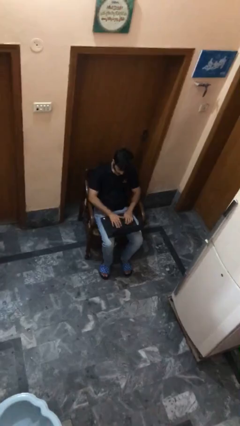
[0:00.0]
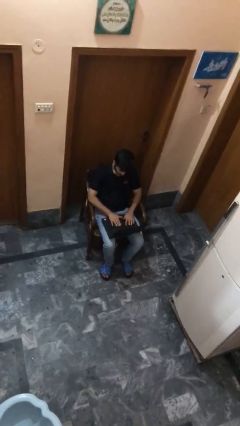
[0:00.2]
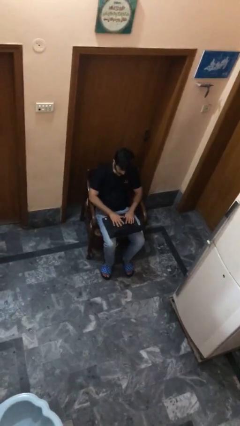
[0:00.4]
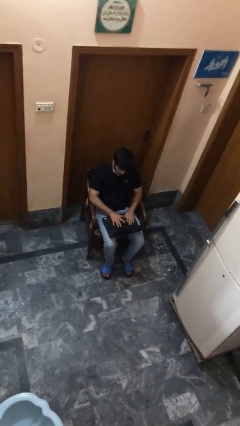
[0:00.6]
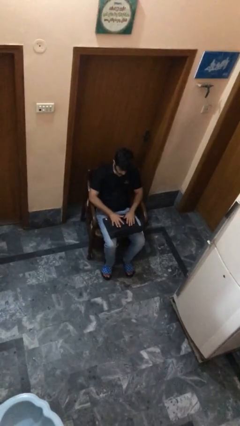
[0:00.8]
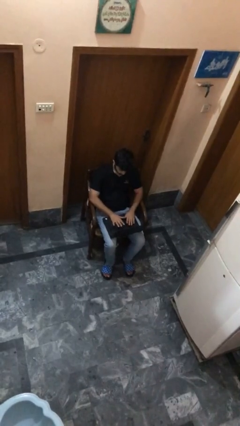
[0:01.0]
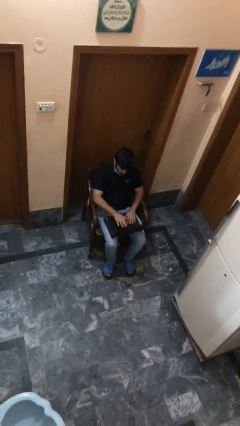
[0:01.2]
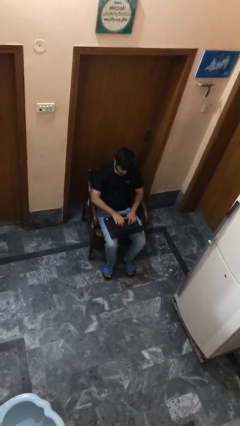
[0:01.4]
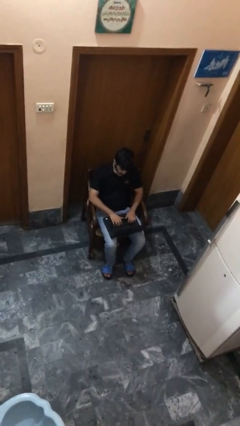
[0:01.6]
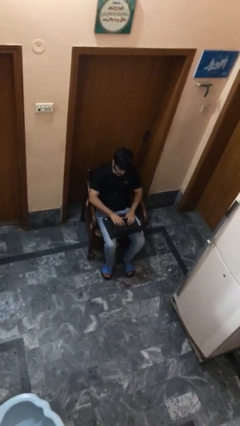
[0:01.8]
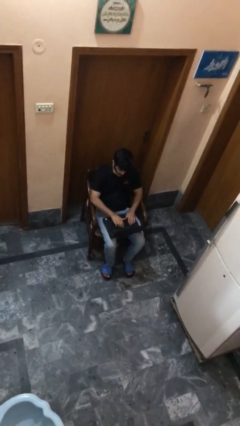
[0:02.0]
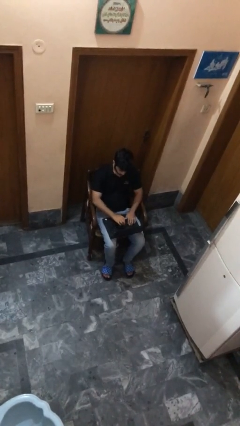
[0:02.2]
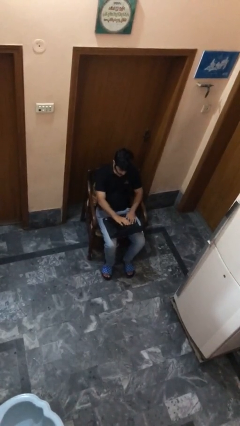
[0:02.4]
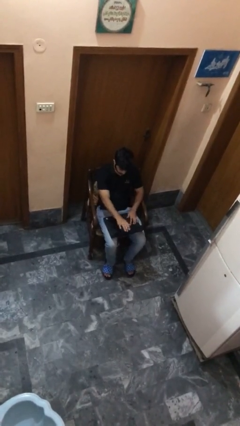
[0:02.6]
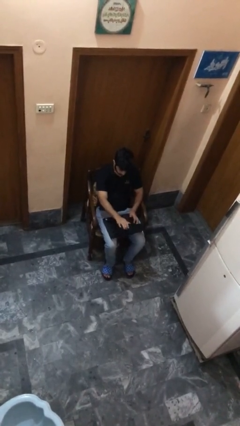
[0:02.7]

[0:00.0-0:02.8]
person interacts with laptop

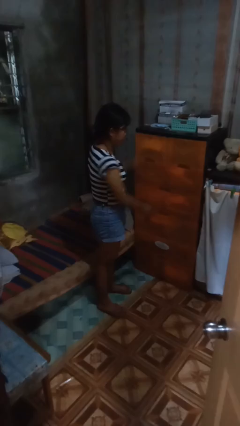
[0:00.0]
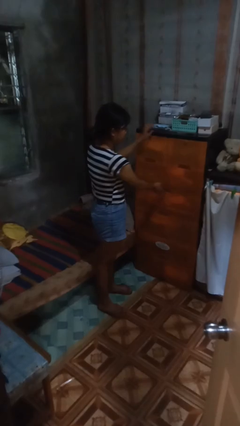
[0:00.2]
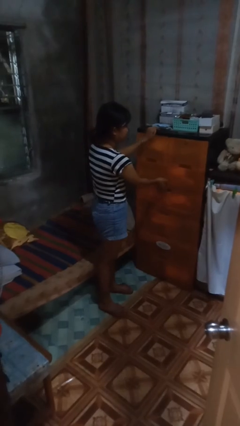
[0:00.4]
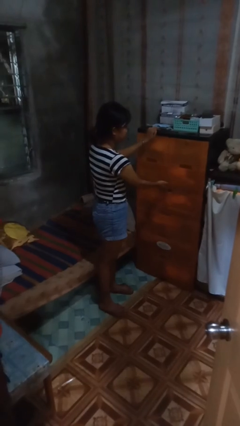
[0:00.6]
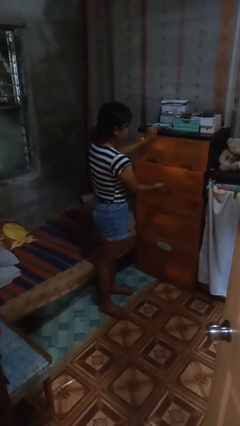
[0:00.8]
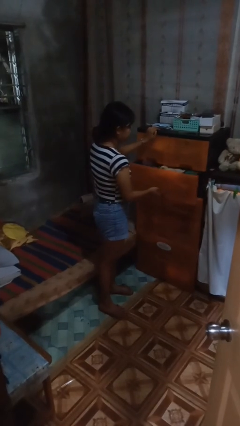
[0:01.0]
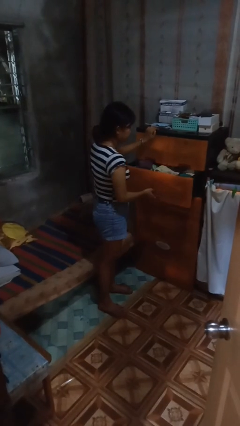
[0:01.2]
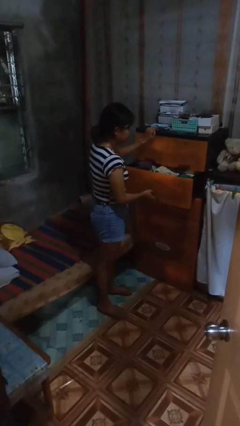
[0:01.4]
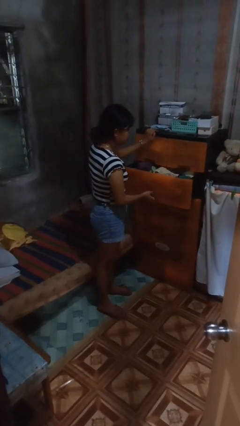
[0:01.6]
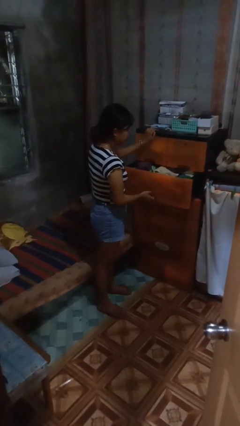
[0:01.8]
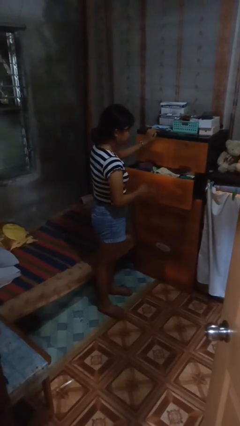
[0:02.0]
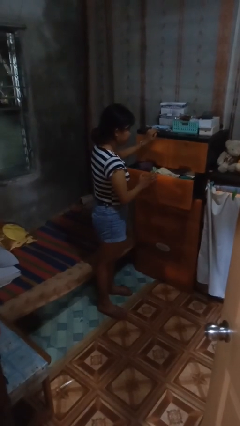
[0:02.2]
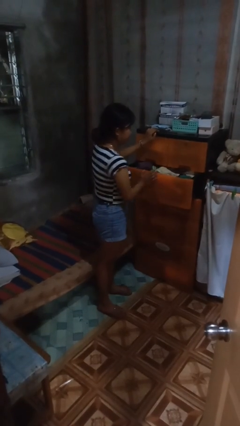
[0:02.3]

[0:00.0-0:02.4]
person opens dresser drawer

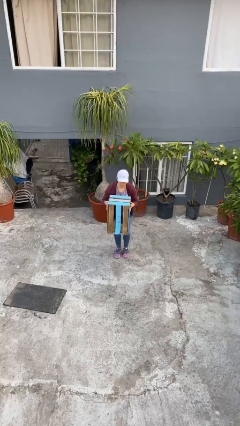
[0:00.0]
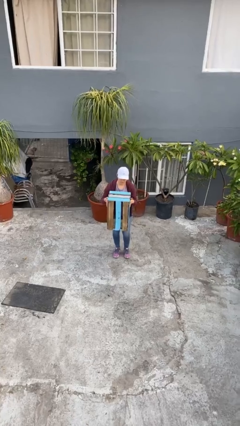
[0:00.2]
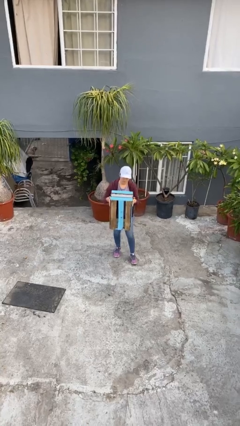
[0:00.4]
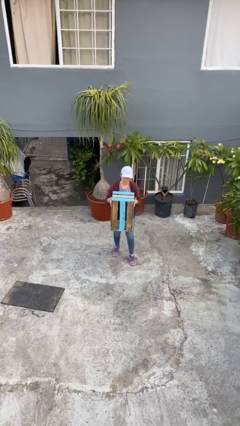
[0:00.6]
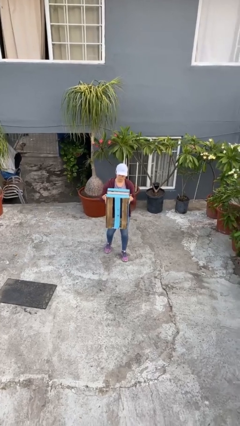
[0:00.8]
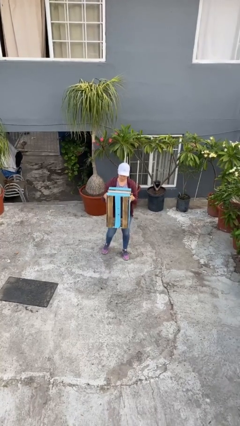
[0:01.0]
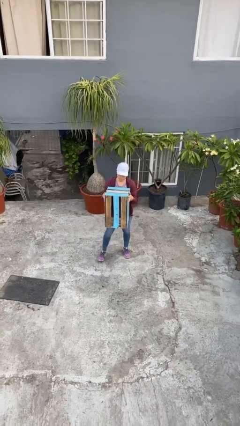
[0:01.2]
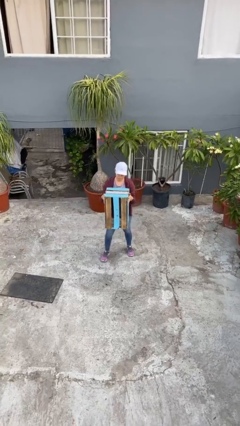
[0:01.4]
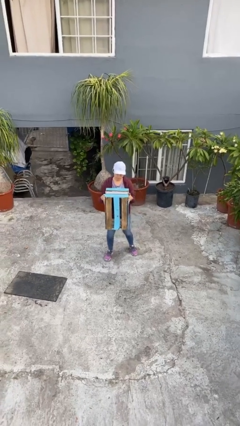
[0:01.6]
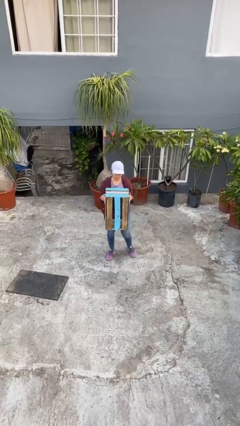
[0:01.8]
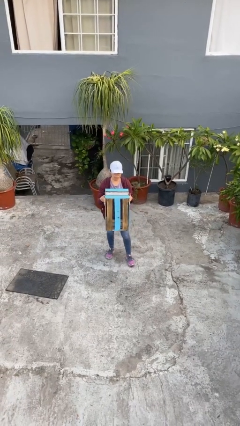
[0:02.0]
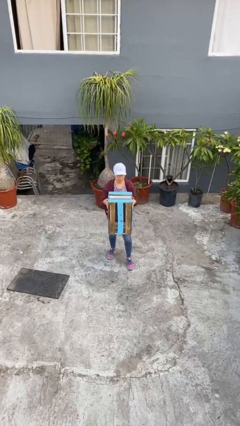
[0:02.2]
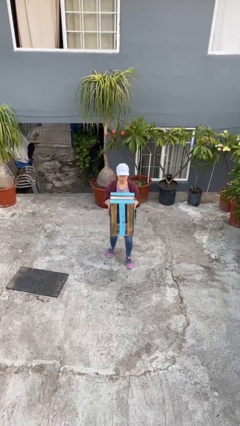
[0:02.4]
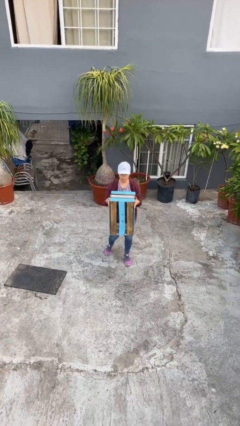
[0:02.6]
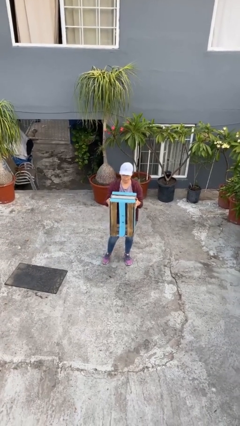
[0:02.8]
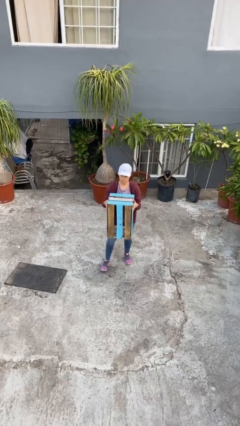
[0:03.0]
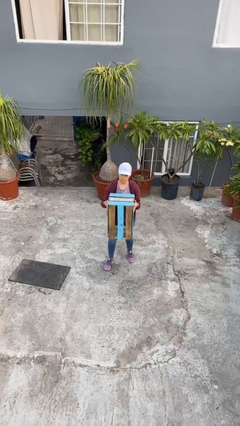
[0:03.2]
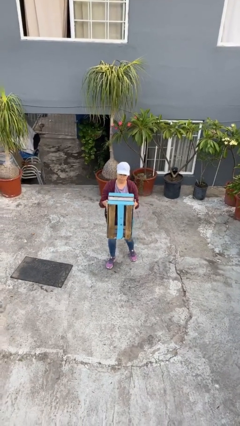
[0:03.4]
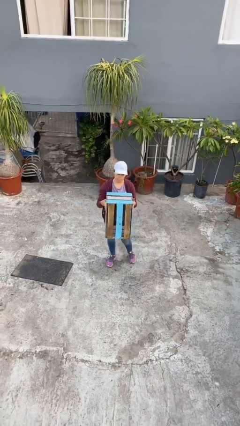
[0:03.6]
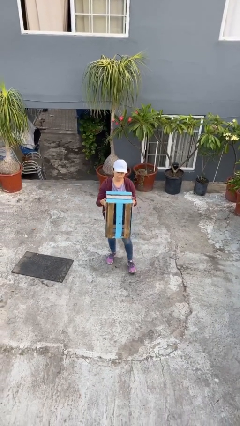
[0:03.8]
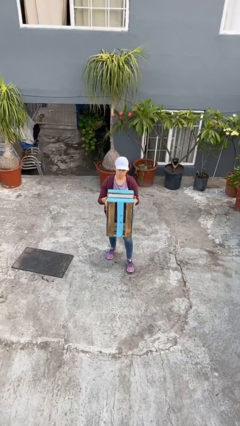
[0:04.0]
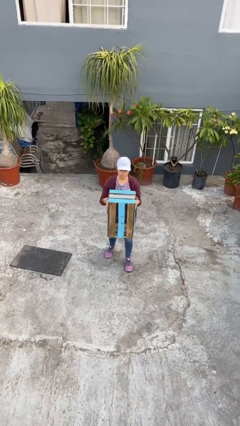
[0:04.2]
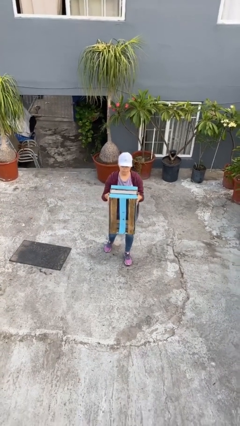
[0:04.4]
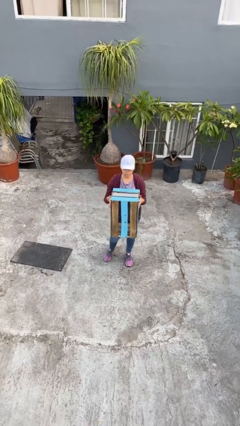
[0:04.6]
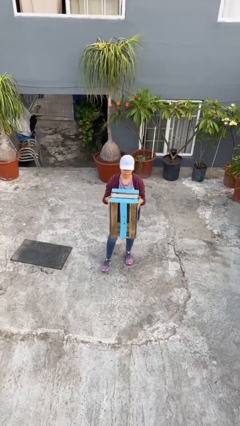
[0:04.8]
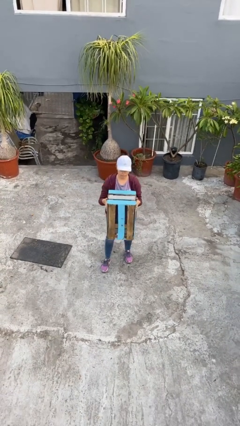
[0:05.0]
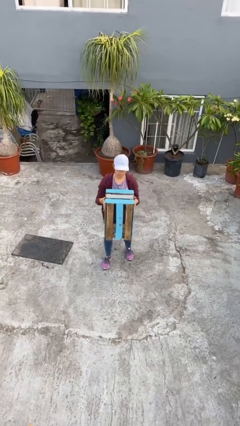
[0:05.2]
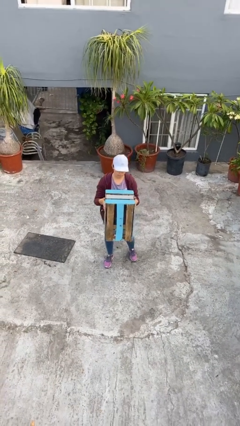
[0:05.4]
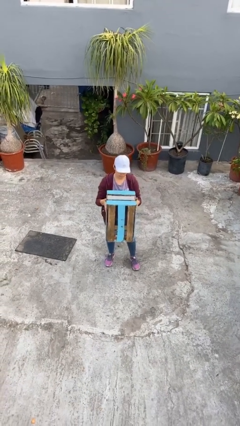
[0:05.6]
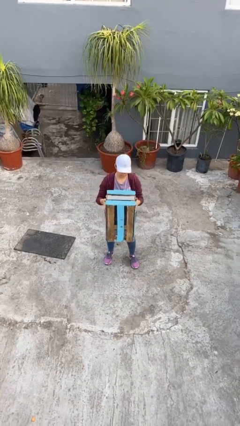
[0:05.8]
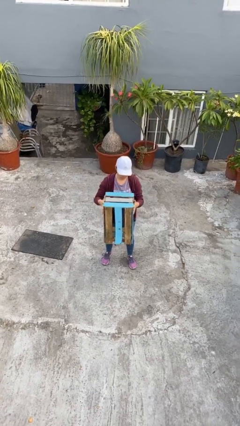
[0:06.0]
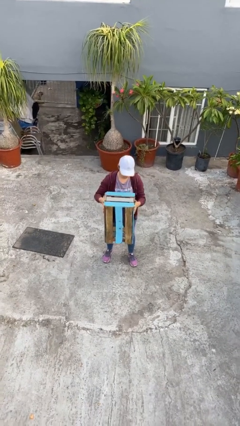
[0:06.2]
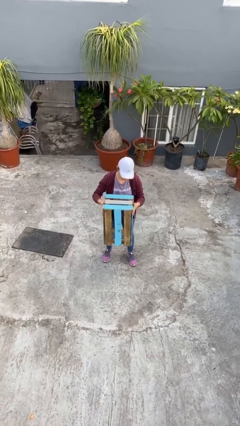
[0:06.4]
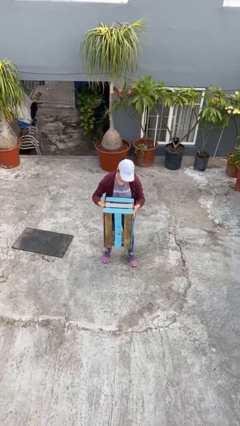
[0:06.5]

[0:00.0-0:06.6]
person carries heavy object

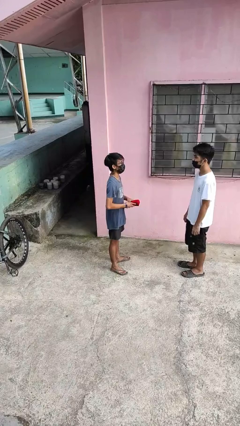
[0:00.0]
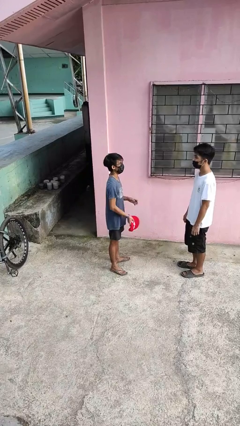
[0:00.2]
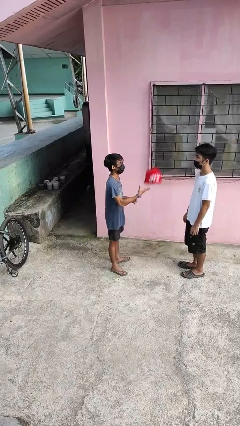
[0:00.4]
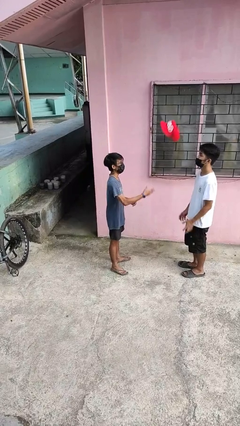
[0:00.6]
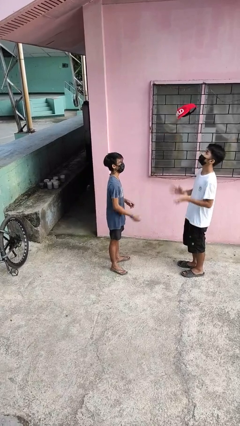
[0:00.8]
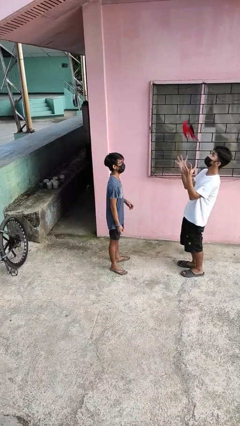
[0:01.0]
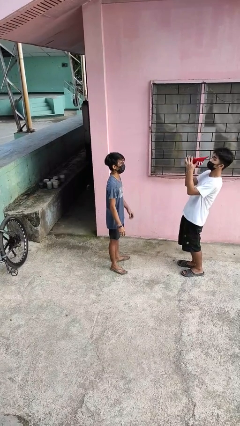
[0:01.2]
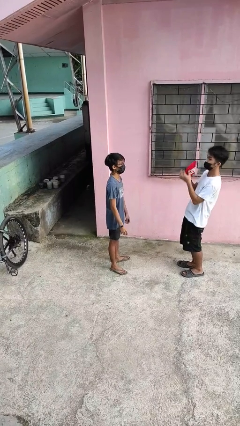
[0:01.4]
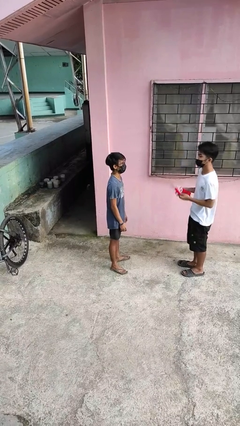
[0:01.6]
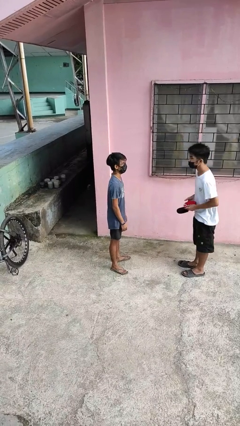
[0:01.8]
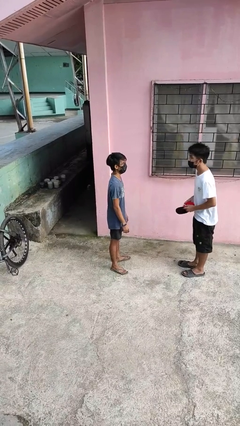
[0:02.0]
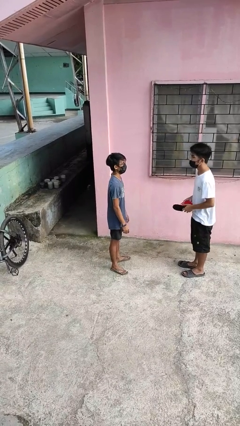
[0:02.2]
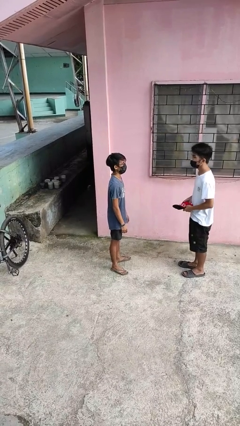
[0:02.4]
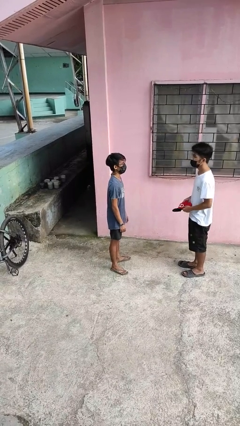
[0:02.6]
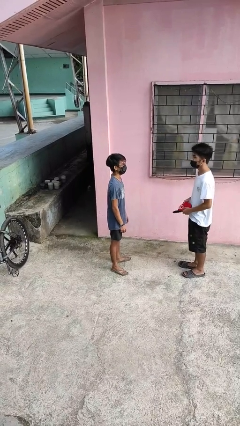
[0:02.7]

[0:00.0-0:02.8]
person throws object to person

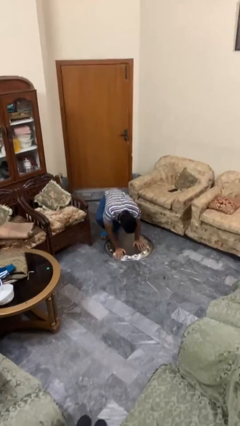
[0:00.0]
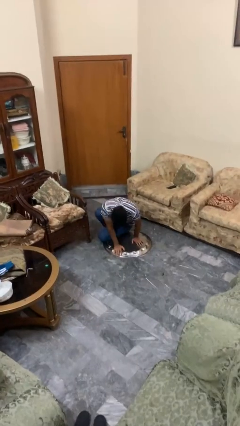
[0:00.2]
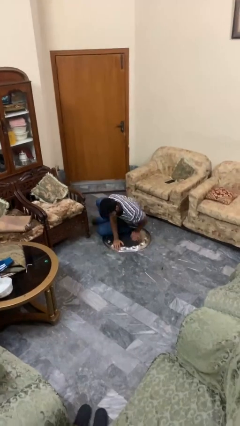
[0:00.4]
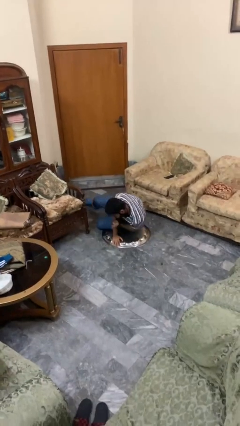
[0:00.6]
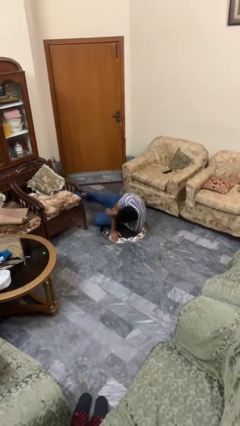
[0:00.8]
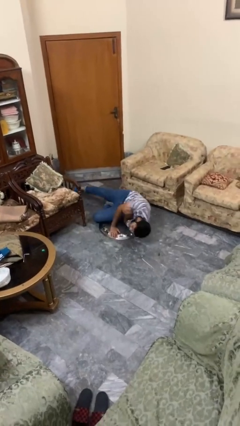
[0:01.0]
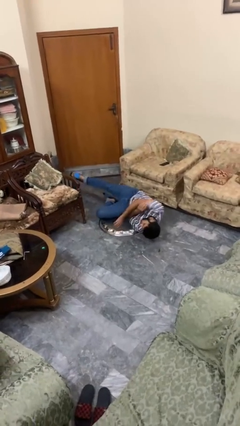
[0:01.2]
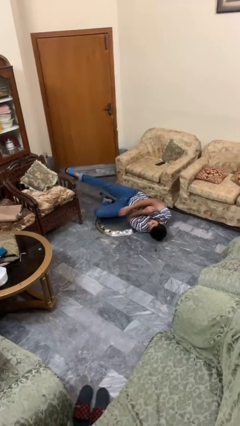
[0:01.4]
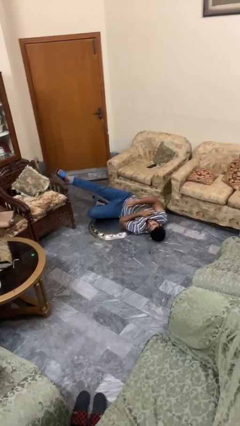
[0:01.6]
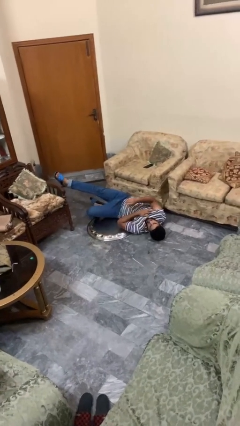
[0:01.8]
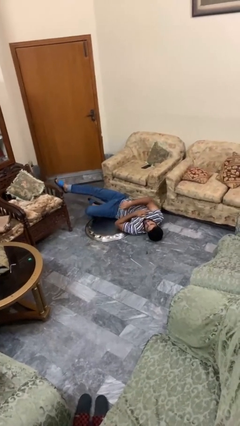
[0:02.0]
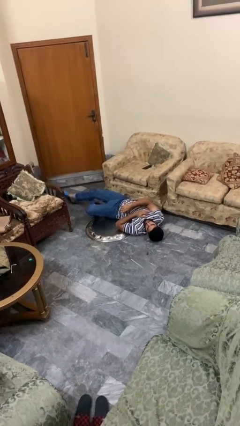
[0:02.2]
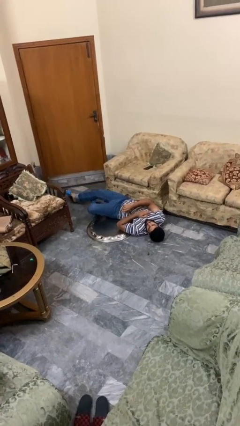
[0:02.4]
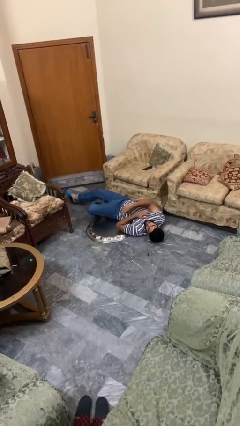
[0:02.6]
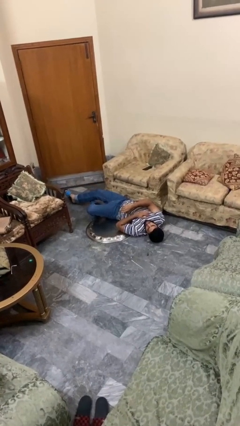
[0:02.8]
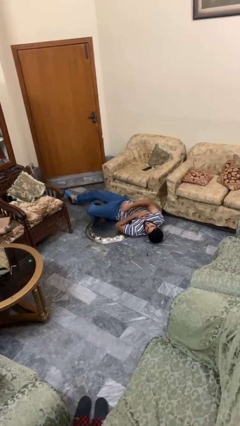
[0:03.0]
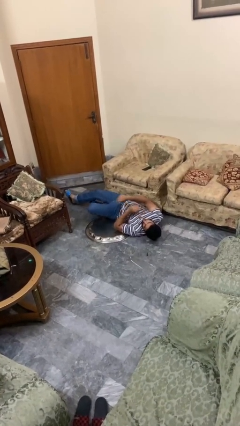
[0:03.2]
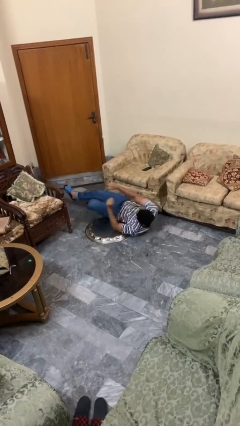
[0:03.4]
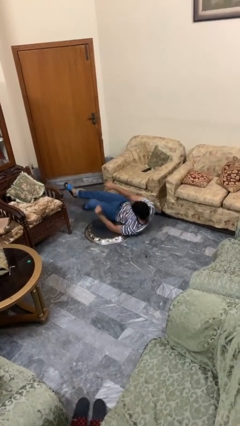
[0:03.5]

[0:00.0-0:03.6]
person lies down on floor
